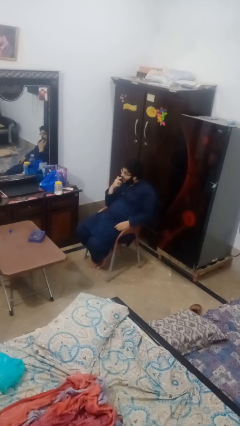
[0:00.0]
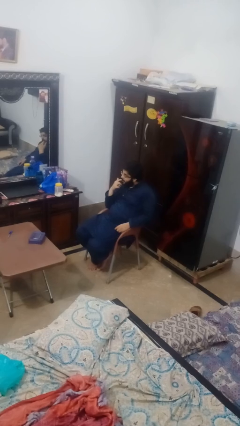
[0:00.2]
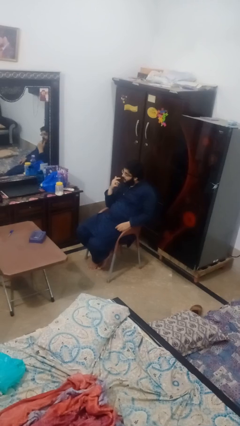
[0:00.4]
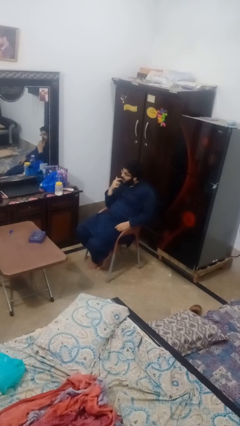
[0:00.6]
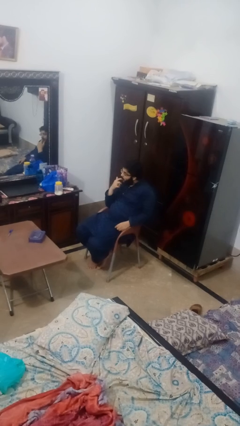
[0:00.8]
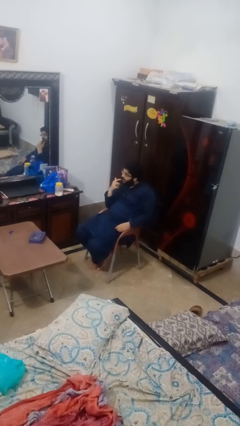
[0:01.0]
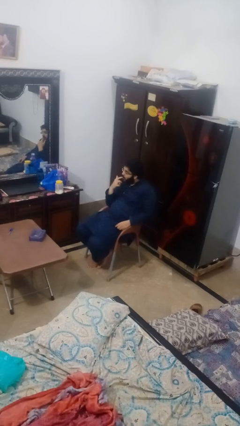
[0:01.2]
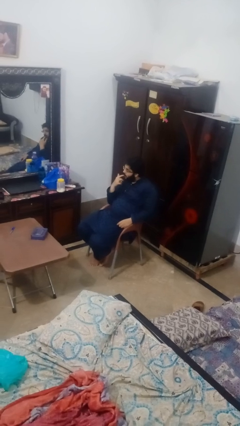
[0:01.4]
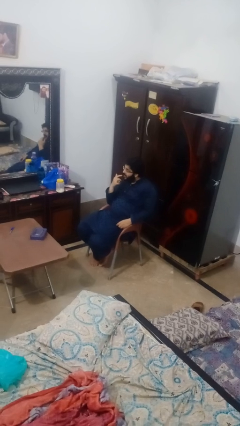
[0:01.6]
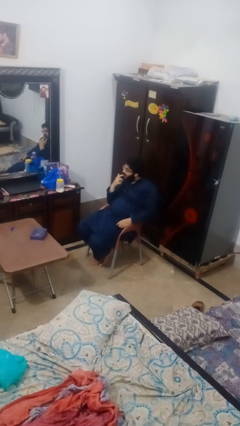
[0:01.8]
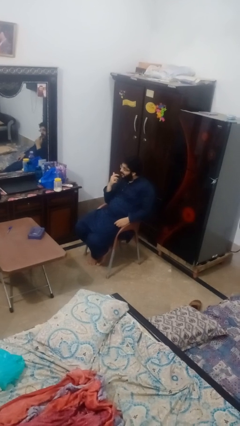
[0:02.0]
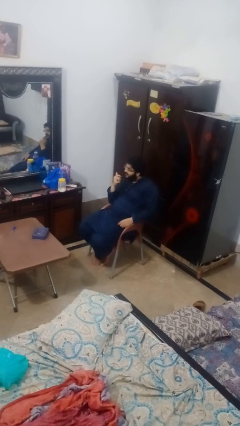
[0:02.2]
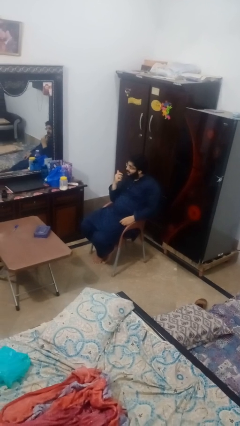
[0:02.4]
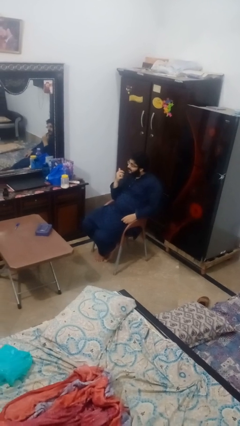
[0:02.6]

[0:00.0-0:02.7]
person licks fingers

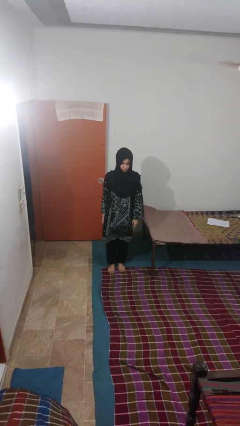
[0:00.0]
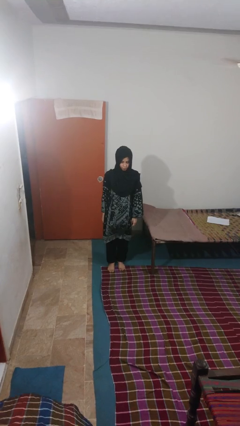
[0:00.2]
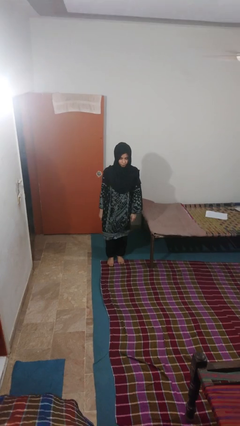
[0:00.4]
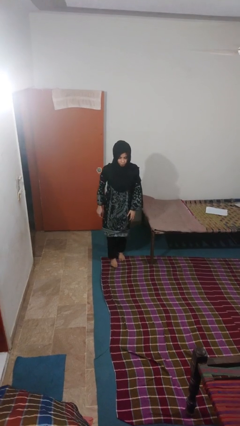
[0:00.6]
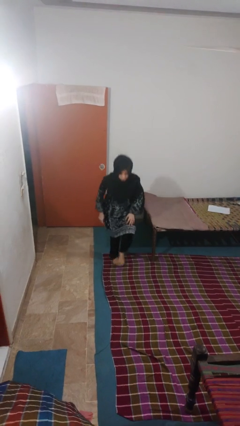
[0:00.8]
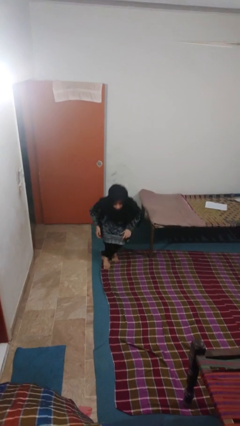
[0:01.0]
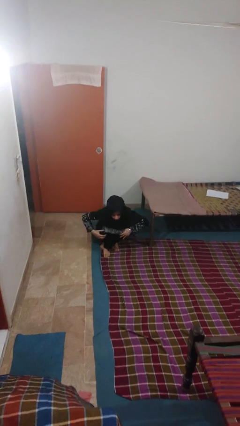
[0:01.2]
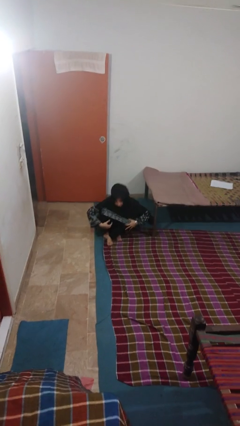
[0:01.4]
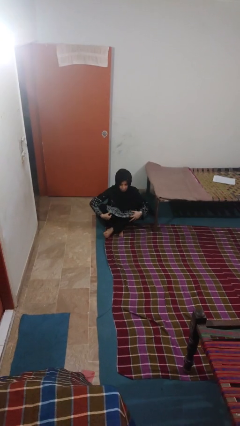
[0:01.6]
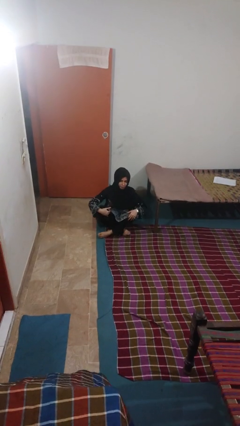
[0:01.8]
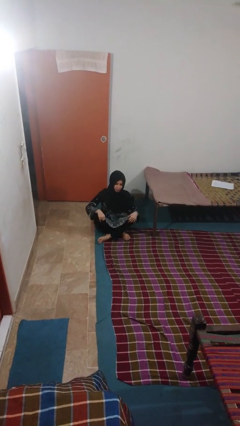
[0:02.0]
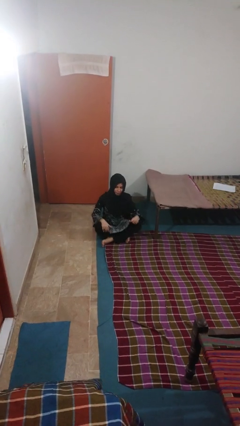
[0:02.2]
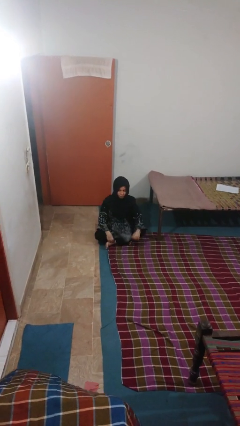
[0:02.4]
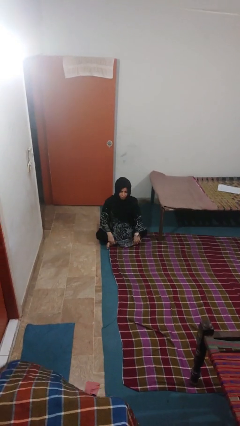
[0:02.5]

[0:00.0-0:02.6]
person sits crisscross

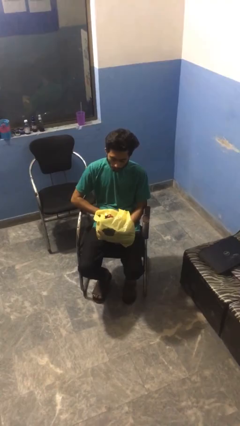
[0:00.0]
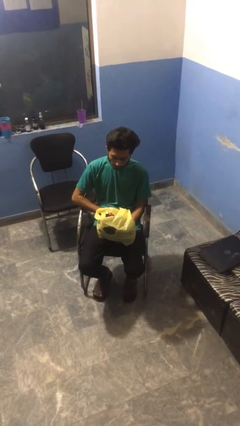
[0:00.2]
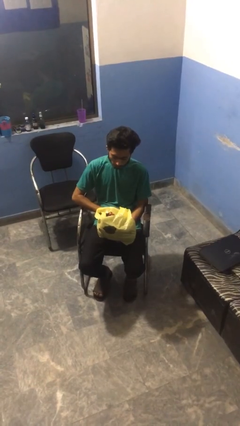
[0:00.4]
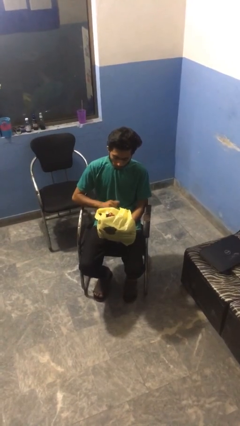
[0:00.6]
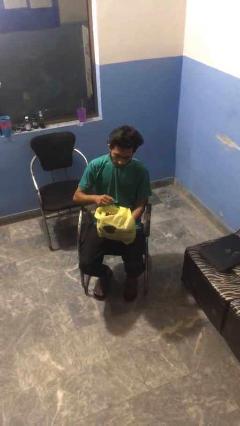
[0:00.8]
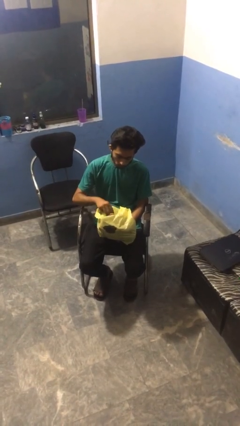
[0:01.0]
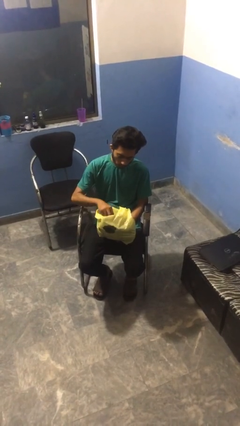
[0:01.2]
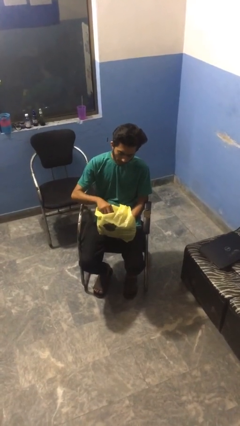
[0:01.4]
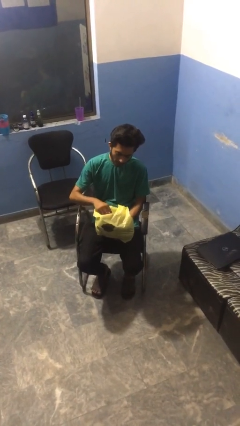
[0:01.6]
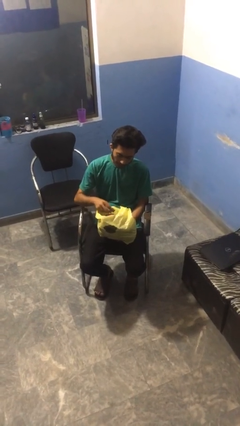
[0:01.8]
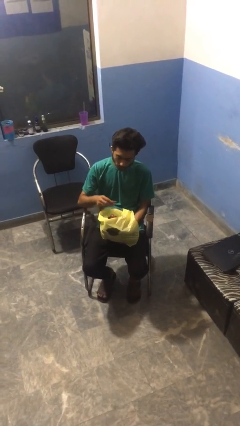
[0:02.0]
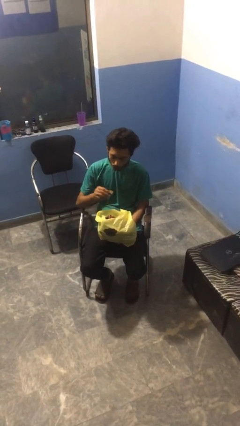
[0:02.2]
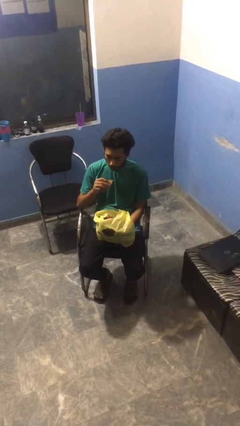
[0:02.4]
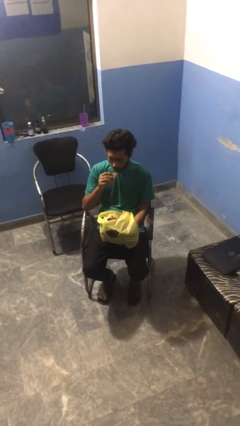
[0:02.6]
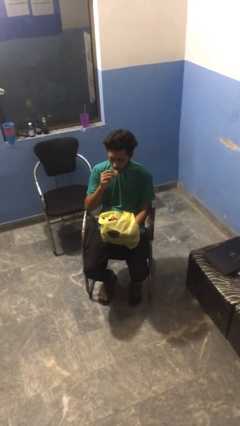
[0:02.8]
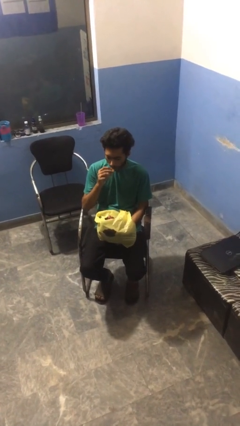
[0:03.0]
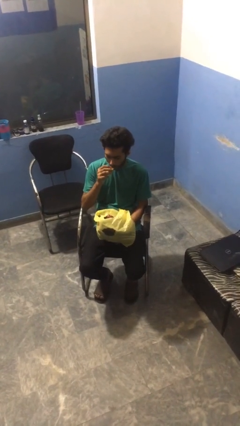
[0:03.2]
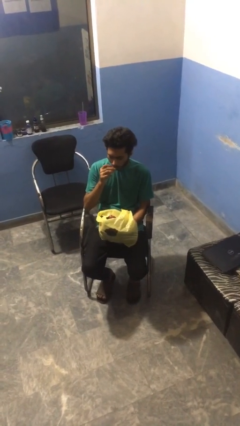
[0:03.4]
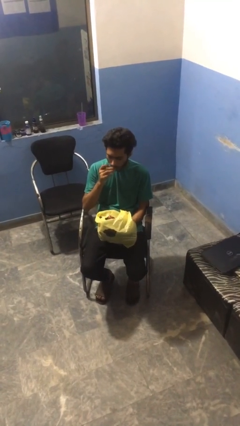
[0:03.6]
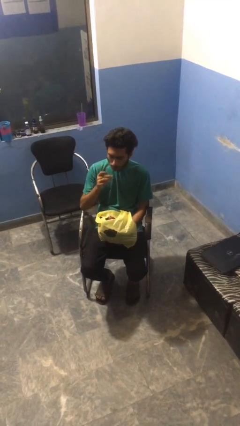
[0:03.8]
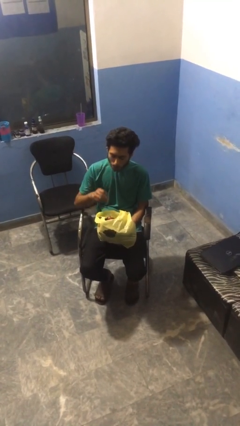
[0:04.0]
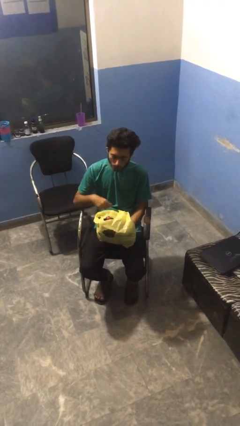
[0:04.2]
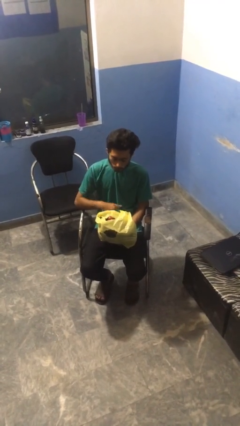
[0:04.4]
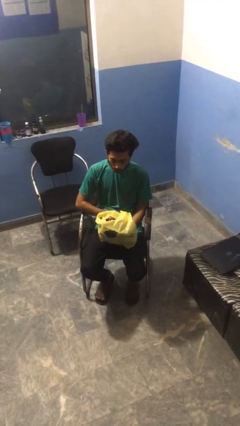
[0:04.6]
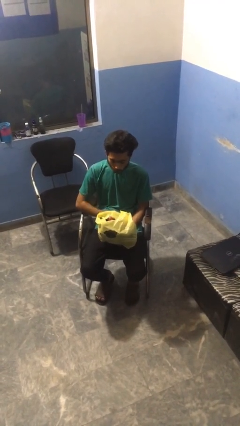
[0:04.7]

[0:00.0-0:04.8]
person eats snack from bag

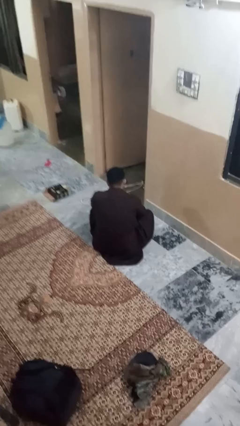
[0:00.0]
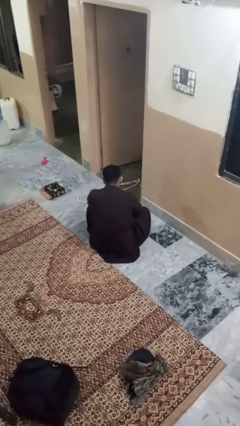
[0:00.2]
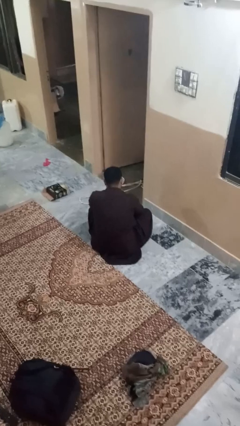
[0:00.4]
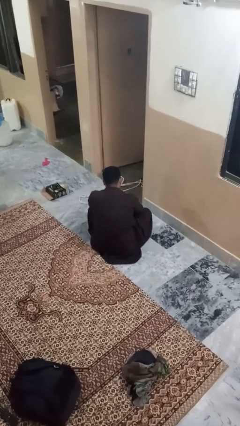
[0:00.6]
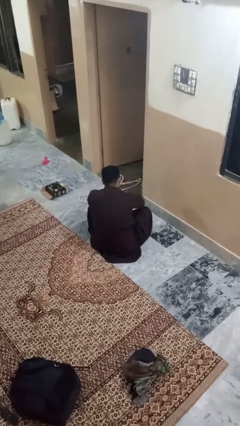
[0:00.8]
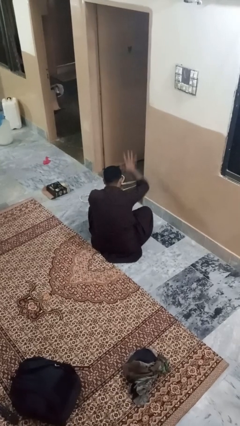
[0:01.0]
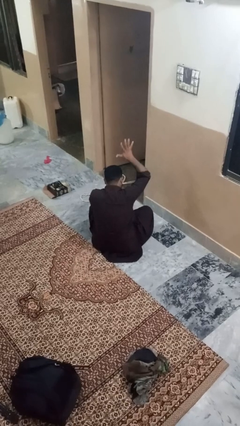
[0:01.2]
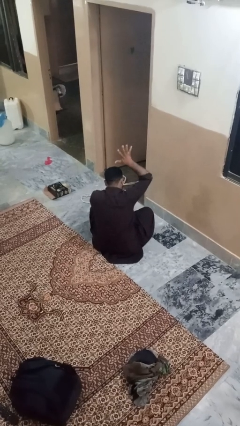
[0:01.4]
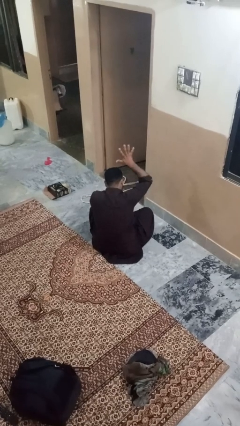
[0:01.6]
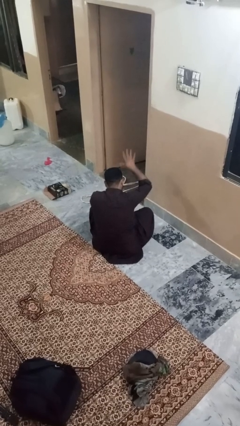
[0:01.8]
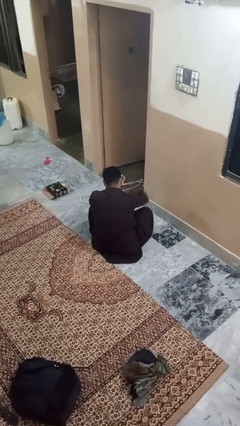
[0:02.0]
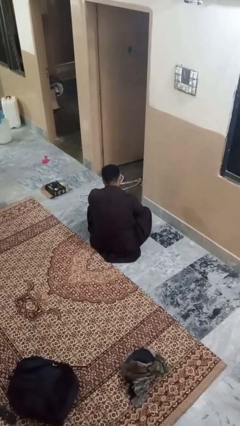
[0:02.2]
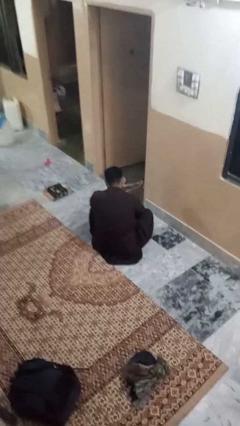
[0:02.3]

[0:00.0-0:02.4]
person gestures number five

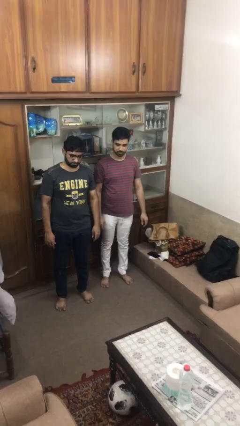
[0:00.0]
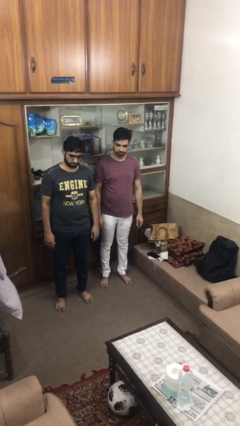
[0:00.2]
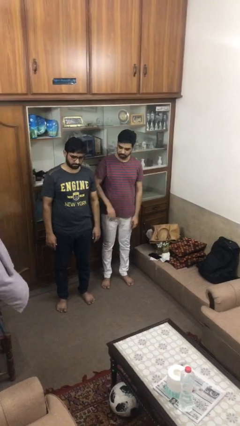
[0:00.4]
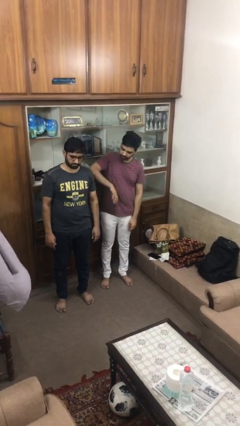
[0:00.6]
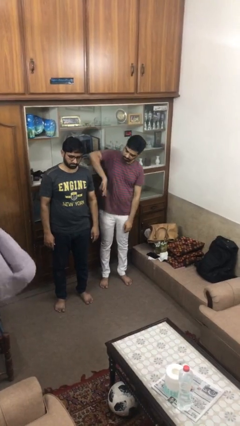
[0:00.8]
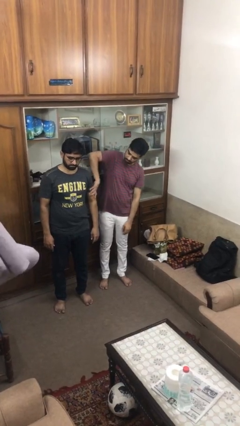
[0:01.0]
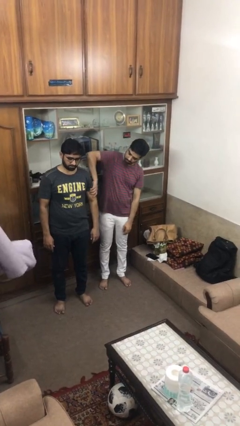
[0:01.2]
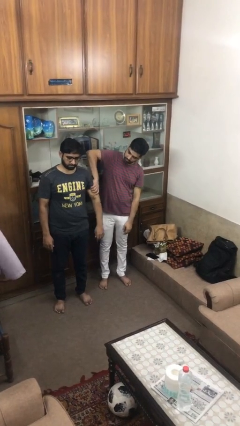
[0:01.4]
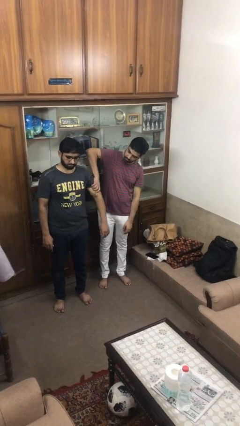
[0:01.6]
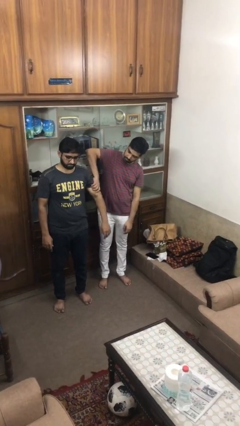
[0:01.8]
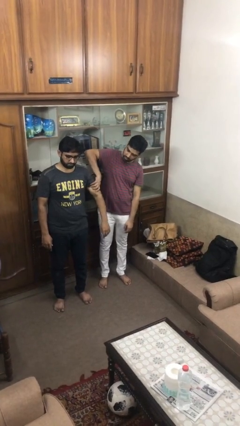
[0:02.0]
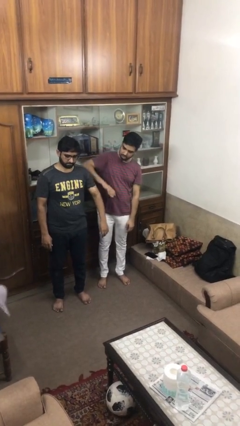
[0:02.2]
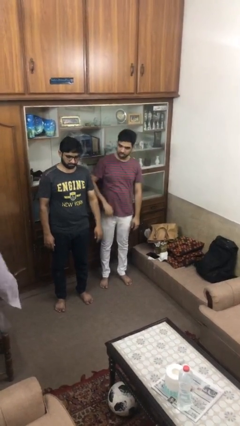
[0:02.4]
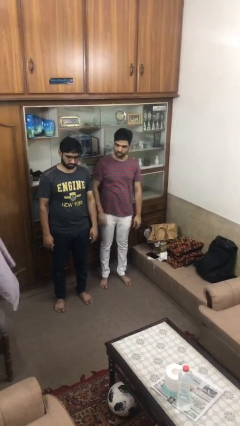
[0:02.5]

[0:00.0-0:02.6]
person grabs person by bicep

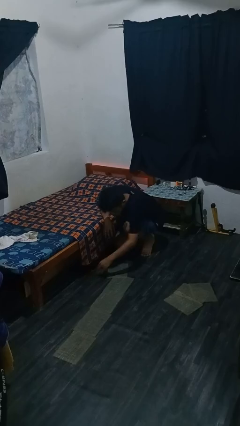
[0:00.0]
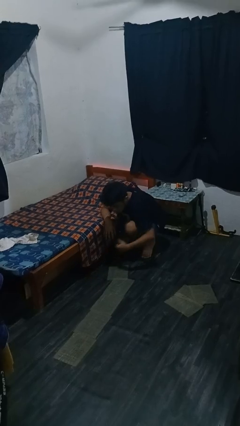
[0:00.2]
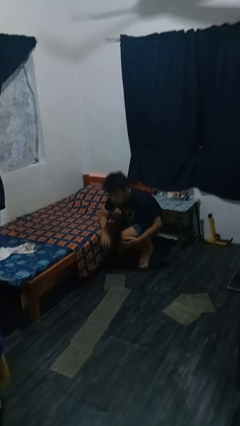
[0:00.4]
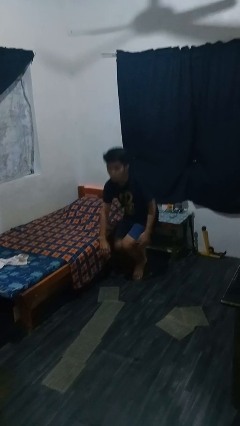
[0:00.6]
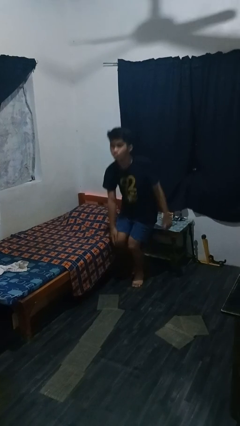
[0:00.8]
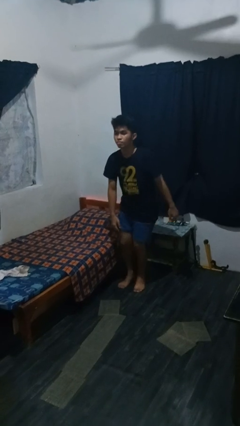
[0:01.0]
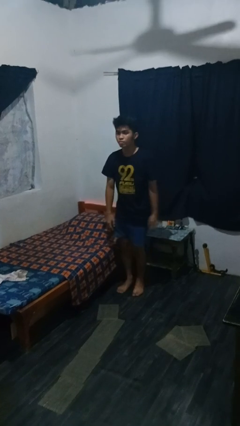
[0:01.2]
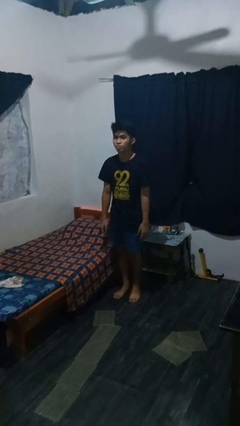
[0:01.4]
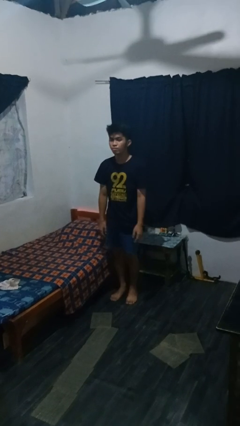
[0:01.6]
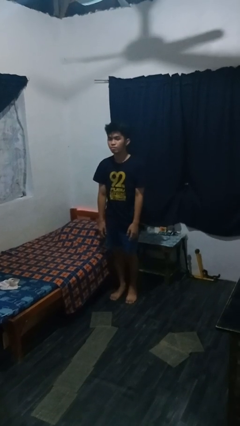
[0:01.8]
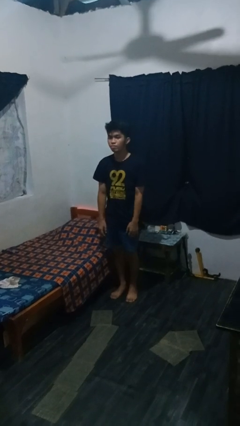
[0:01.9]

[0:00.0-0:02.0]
person stands up from floor
